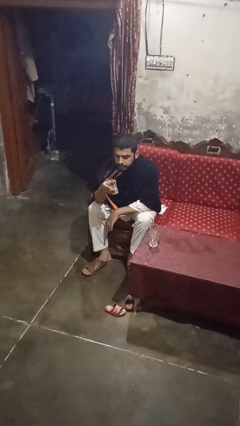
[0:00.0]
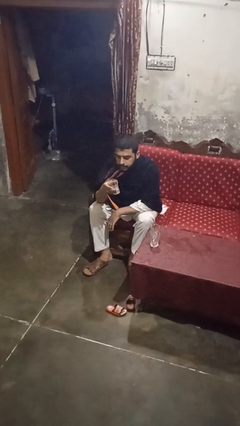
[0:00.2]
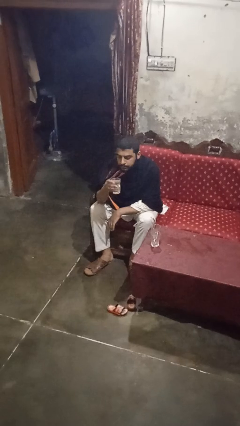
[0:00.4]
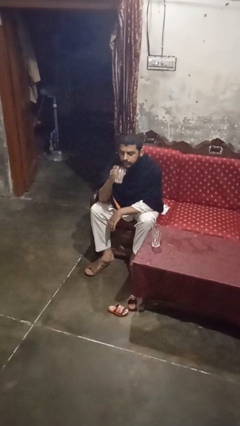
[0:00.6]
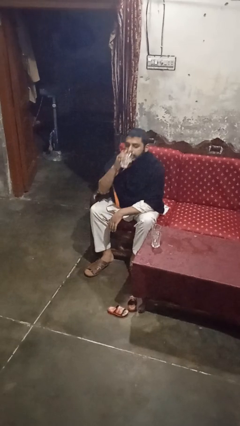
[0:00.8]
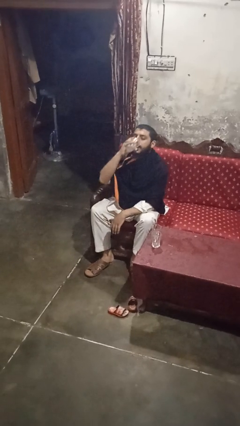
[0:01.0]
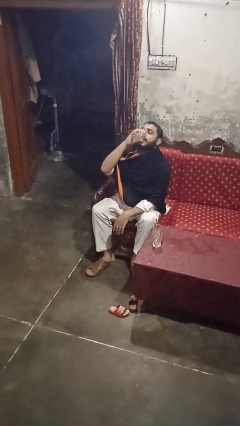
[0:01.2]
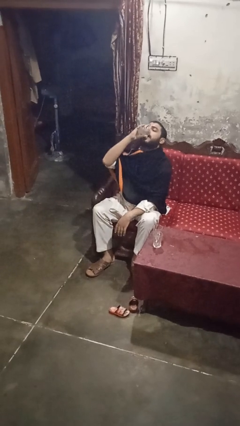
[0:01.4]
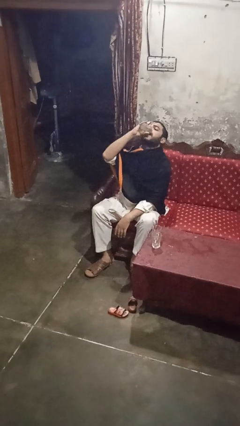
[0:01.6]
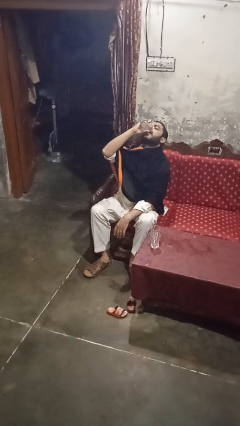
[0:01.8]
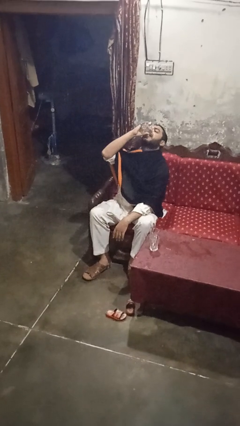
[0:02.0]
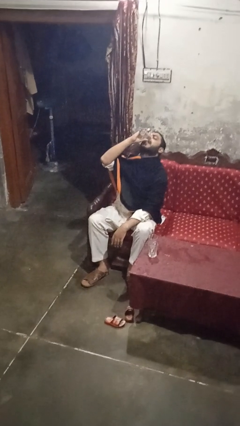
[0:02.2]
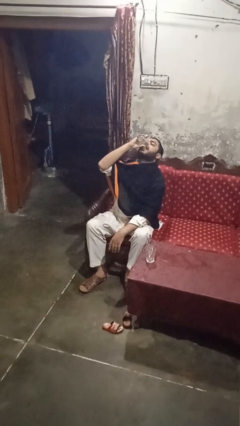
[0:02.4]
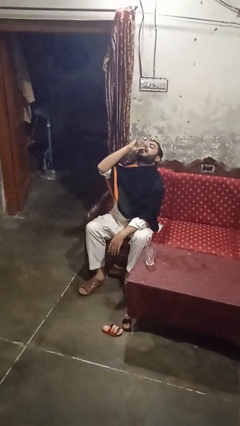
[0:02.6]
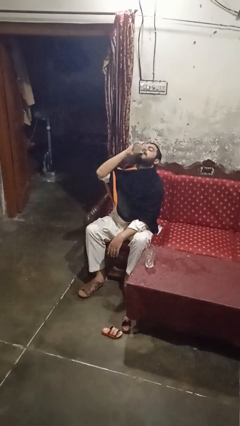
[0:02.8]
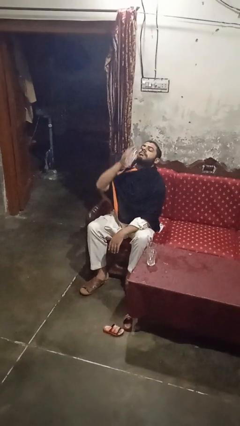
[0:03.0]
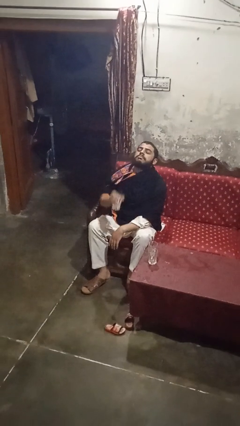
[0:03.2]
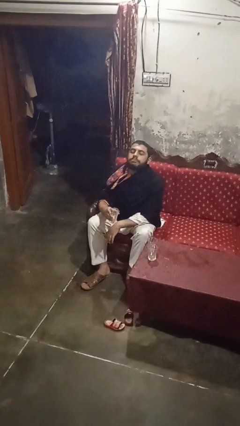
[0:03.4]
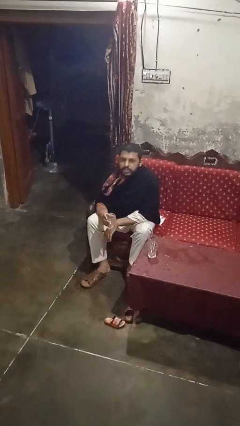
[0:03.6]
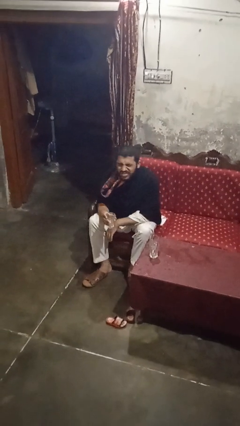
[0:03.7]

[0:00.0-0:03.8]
person drinks from shotglass

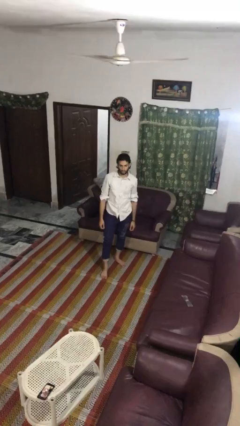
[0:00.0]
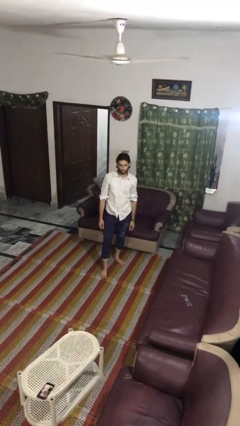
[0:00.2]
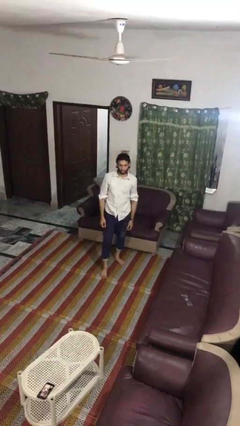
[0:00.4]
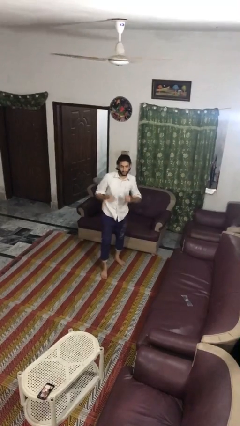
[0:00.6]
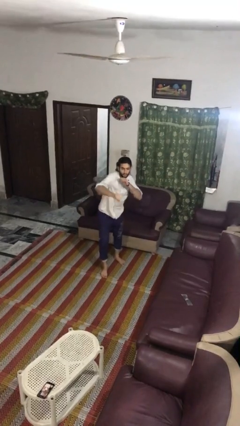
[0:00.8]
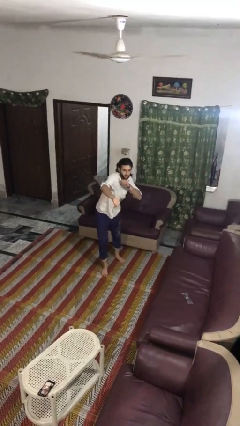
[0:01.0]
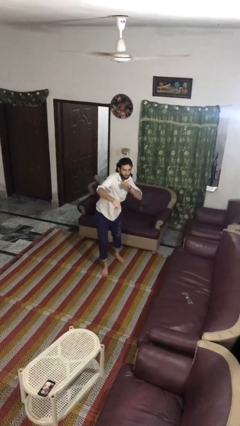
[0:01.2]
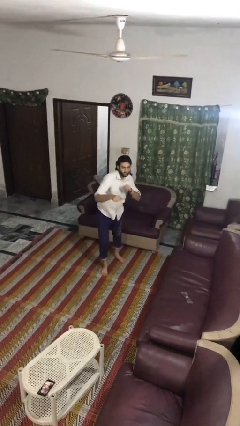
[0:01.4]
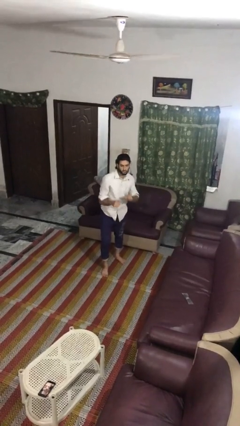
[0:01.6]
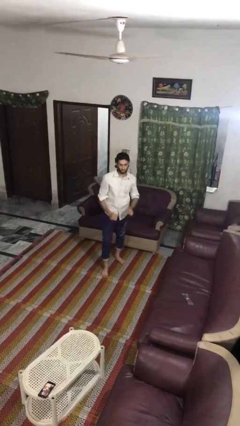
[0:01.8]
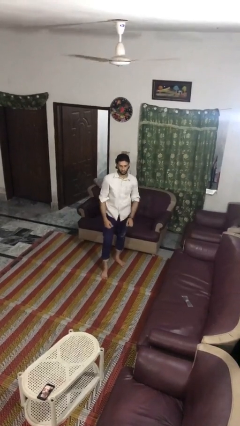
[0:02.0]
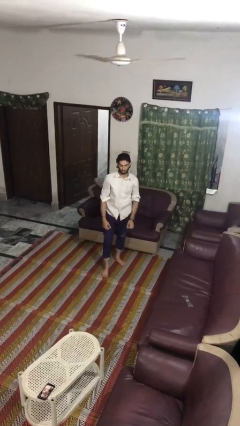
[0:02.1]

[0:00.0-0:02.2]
person punches

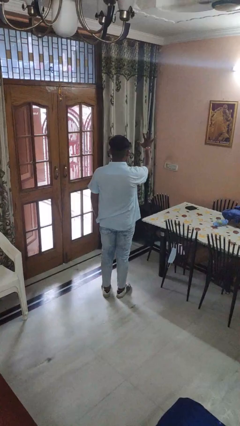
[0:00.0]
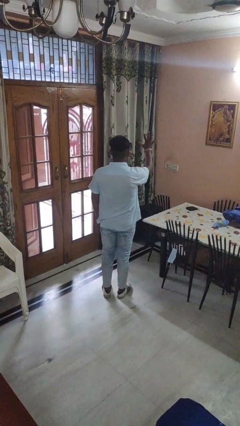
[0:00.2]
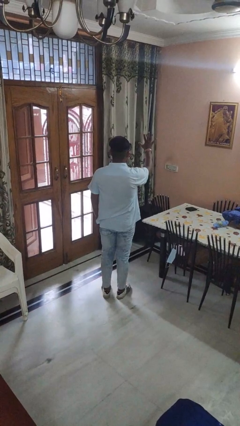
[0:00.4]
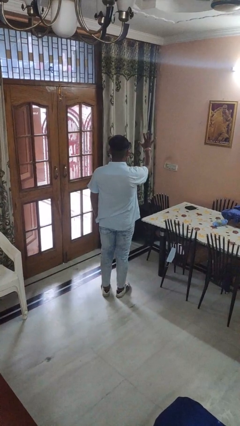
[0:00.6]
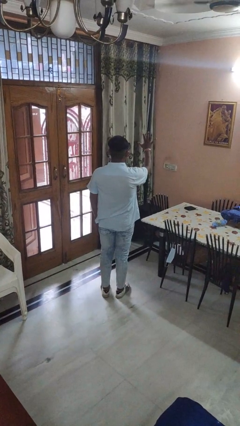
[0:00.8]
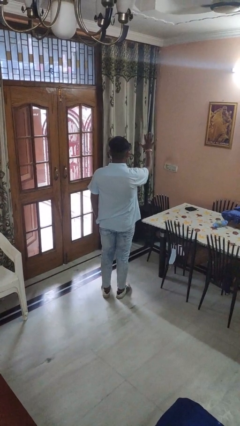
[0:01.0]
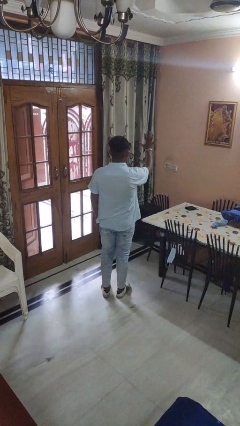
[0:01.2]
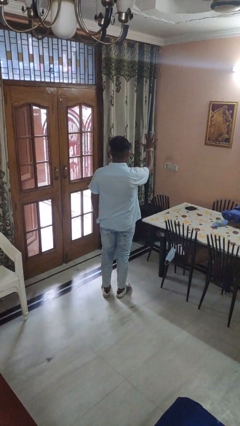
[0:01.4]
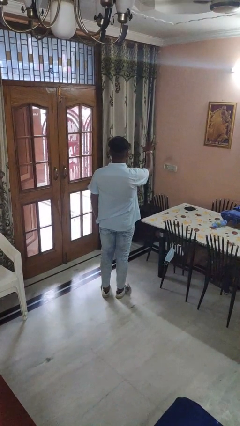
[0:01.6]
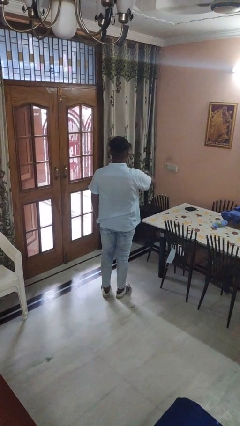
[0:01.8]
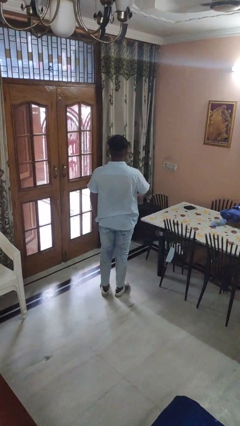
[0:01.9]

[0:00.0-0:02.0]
person gestures number five

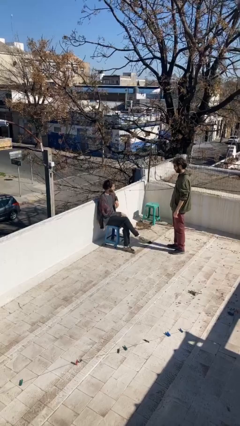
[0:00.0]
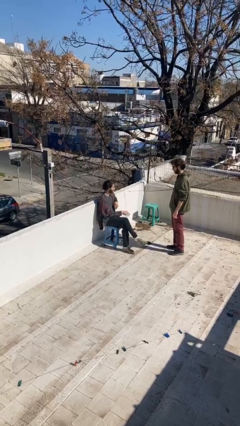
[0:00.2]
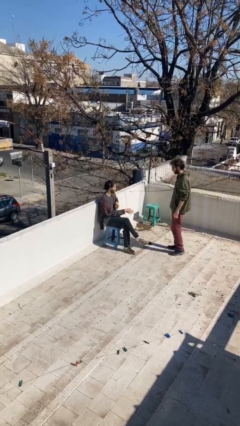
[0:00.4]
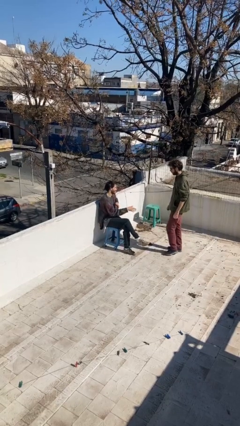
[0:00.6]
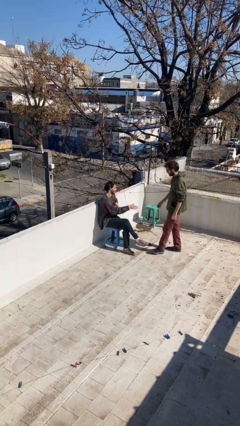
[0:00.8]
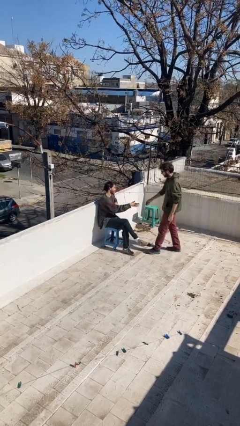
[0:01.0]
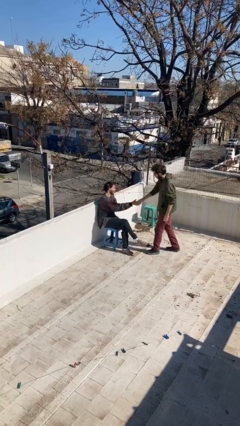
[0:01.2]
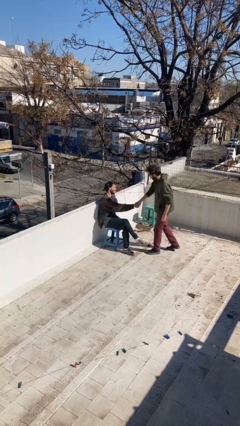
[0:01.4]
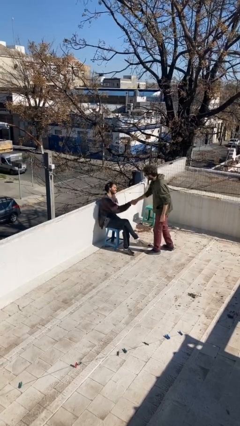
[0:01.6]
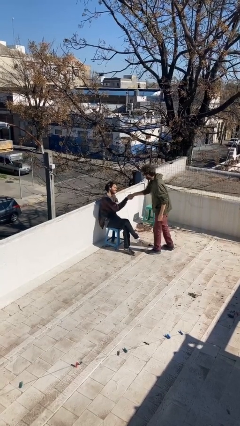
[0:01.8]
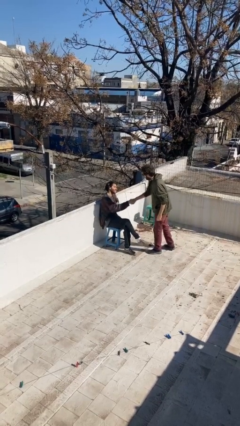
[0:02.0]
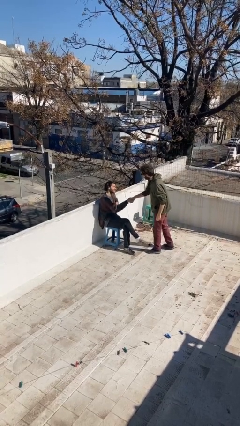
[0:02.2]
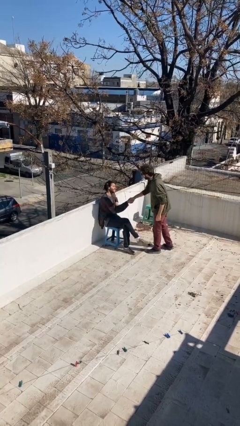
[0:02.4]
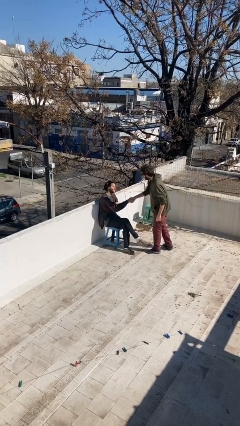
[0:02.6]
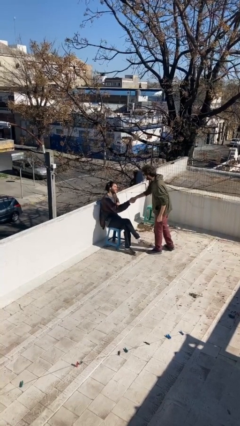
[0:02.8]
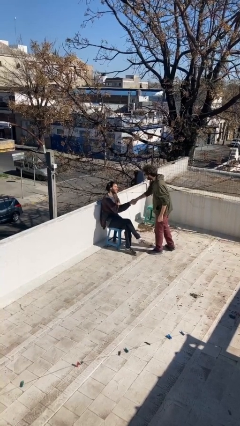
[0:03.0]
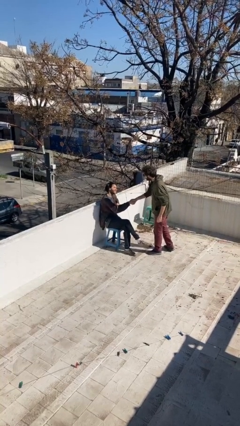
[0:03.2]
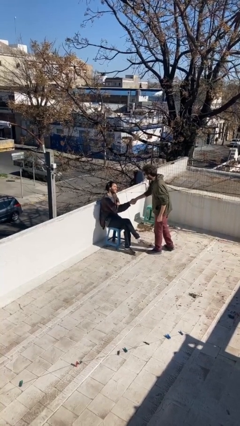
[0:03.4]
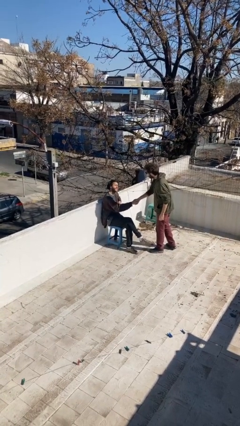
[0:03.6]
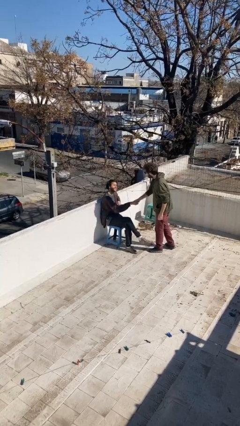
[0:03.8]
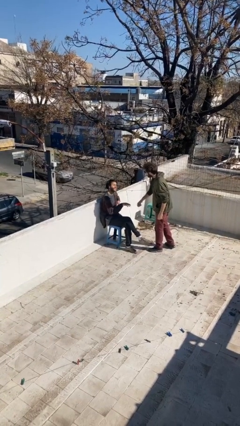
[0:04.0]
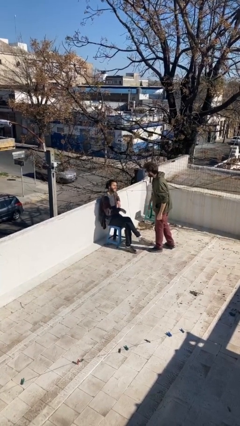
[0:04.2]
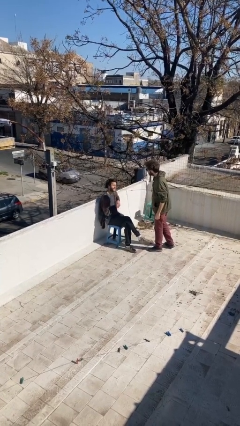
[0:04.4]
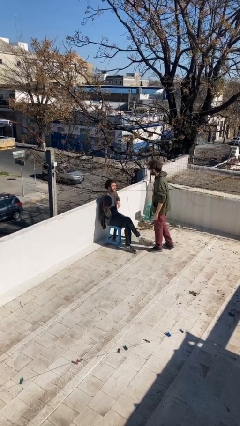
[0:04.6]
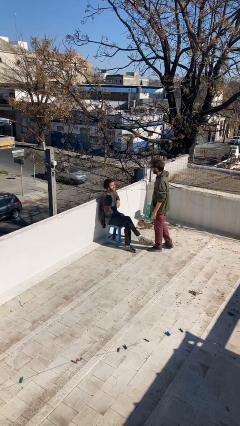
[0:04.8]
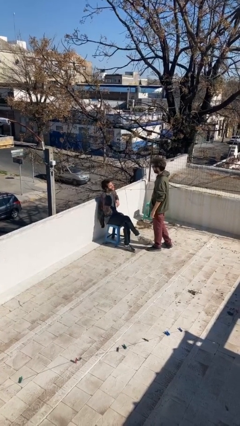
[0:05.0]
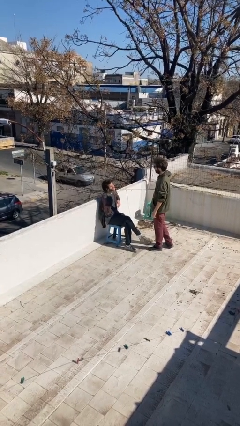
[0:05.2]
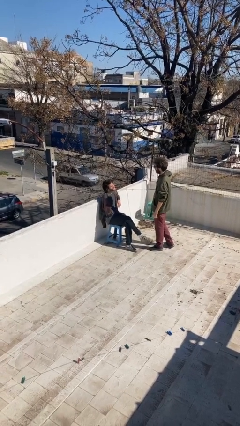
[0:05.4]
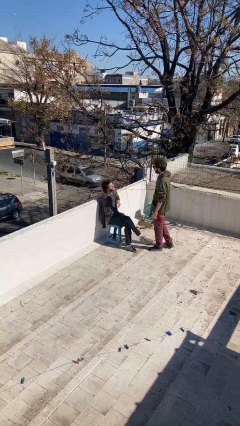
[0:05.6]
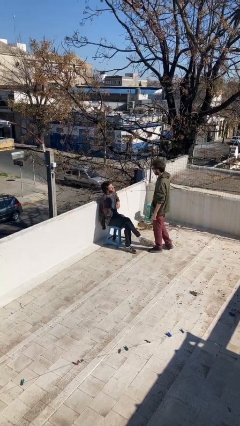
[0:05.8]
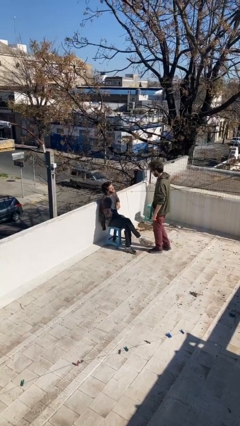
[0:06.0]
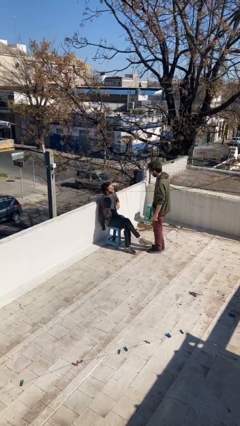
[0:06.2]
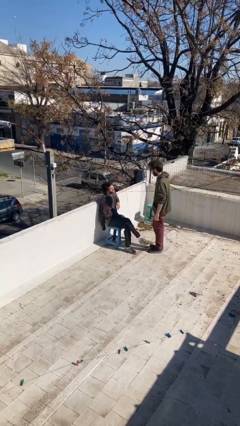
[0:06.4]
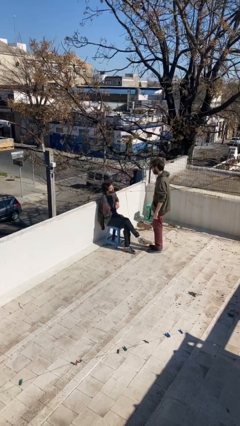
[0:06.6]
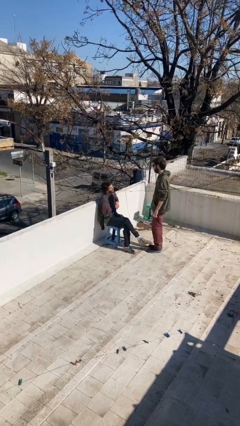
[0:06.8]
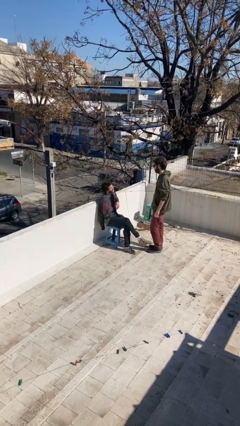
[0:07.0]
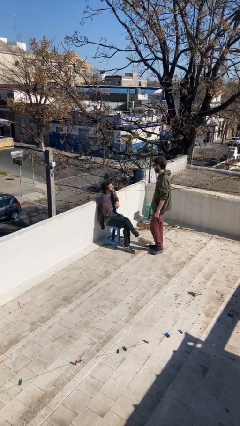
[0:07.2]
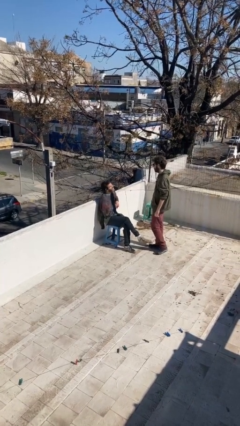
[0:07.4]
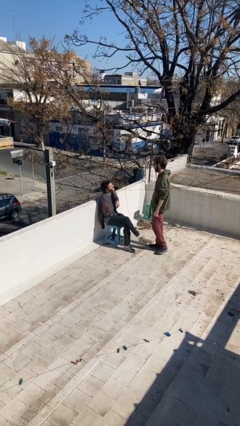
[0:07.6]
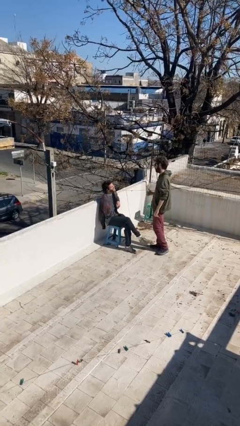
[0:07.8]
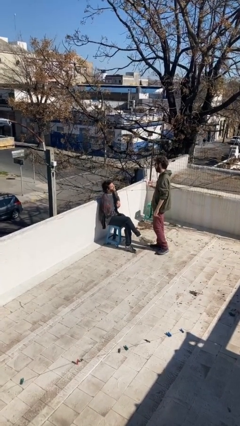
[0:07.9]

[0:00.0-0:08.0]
person shakes hand

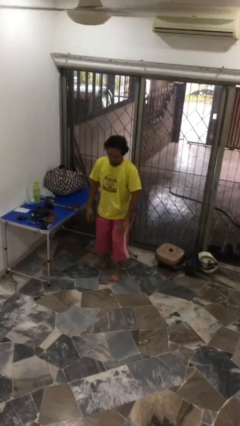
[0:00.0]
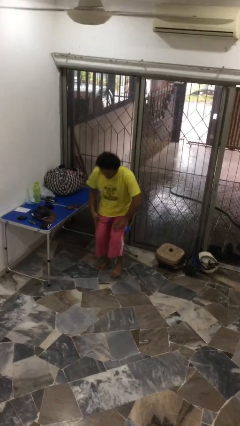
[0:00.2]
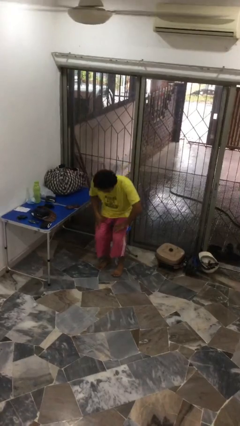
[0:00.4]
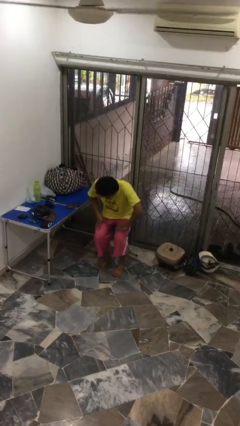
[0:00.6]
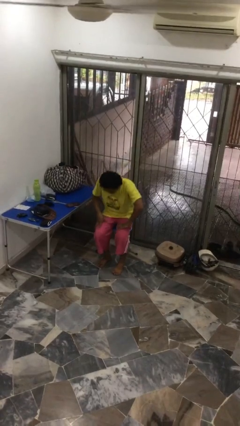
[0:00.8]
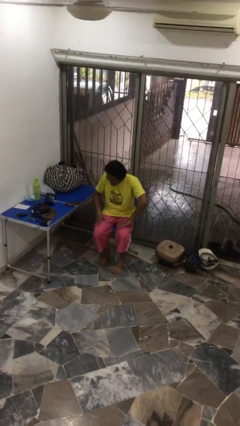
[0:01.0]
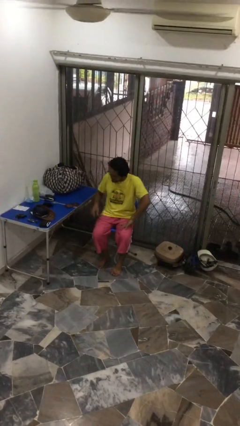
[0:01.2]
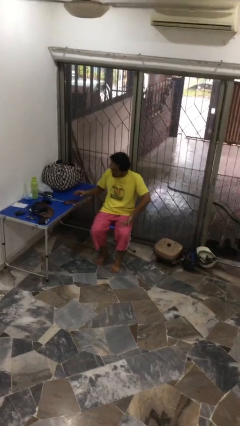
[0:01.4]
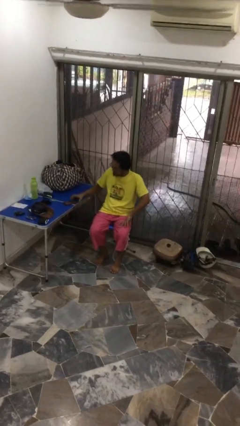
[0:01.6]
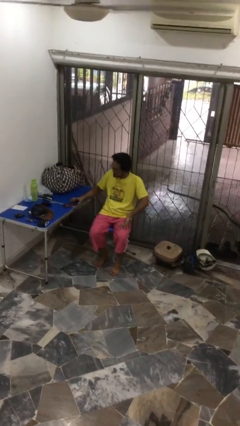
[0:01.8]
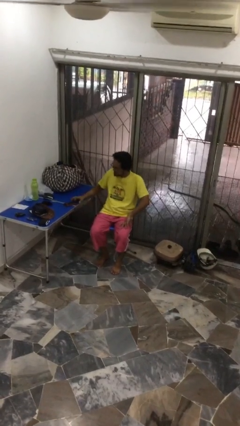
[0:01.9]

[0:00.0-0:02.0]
person sits down
